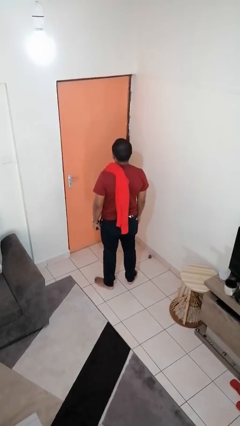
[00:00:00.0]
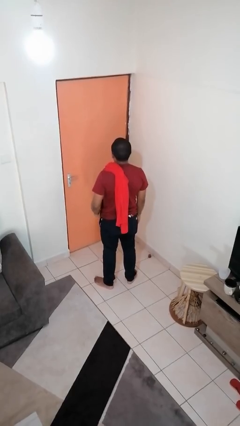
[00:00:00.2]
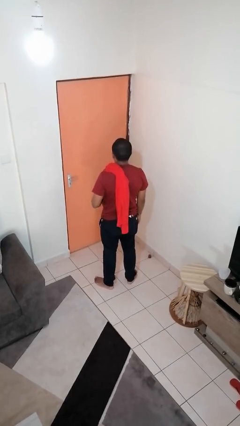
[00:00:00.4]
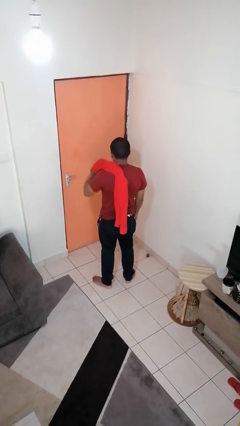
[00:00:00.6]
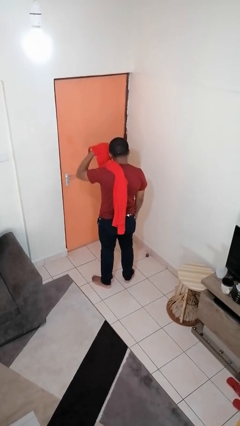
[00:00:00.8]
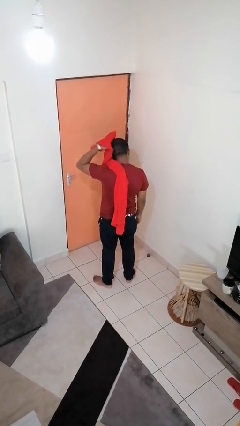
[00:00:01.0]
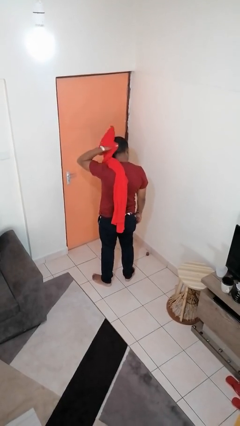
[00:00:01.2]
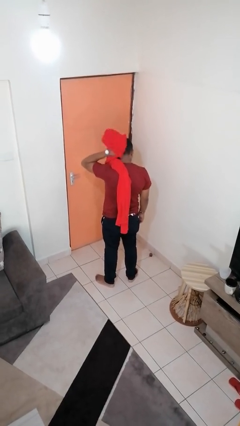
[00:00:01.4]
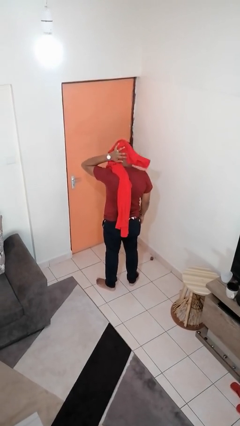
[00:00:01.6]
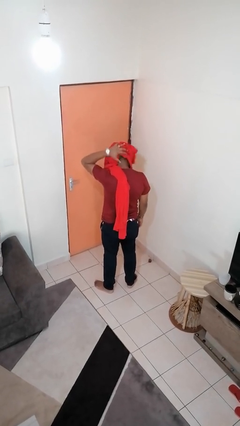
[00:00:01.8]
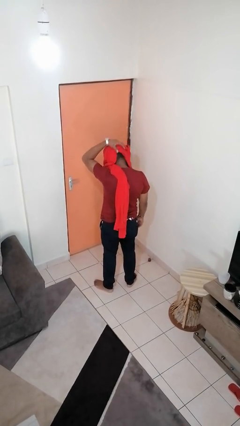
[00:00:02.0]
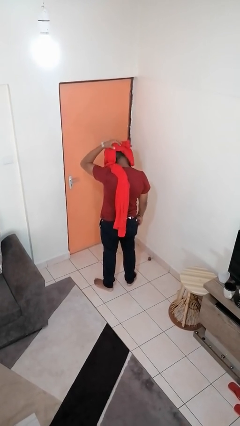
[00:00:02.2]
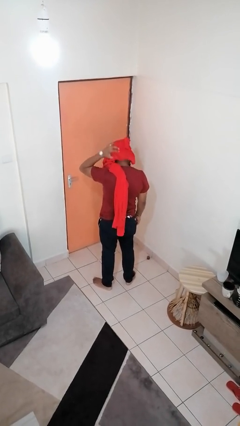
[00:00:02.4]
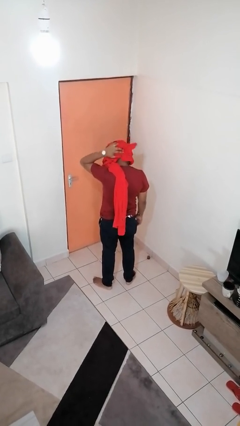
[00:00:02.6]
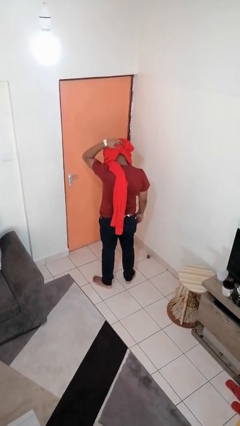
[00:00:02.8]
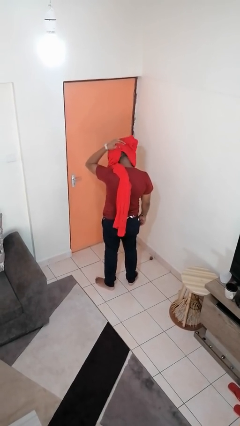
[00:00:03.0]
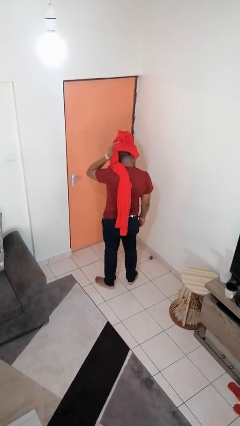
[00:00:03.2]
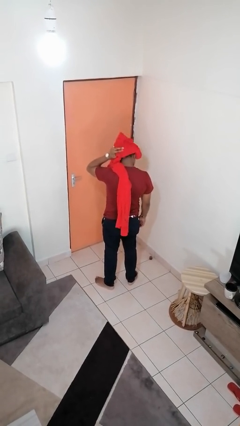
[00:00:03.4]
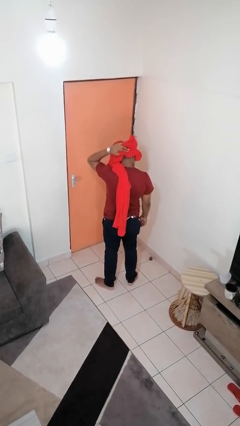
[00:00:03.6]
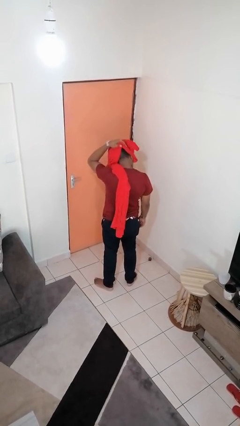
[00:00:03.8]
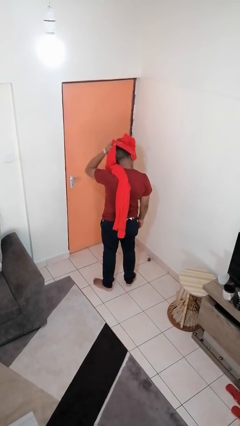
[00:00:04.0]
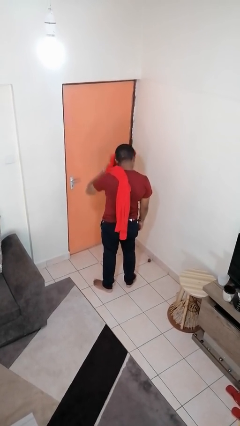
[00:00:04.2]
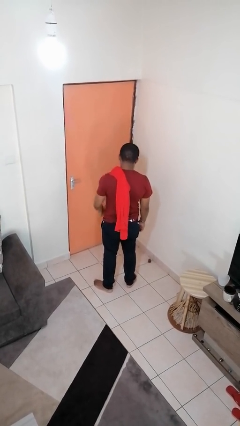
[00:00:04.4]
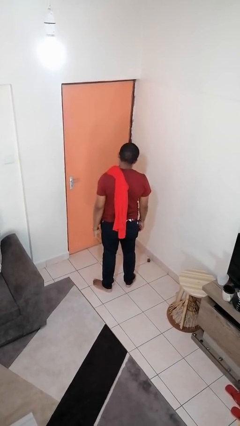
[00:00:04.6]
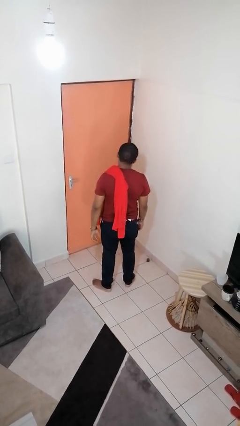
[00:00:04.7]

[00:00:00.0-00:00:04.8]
person dries hair with towel

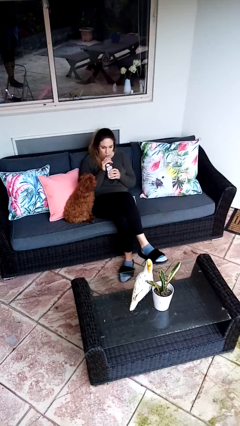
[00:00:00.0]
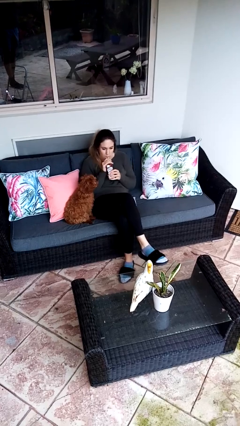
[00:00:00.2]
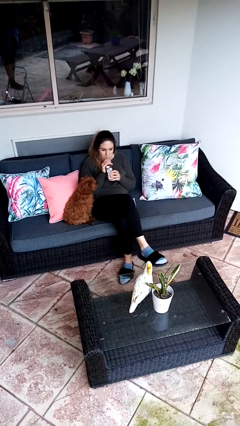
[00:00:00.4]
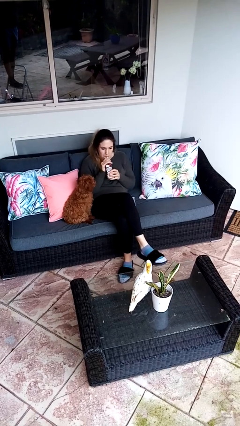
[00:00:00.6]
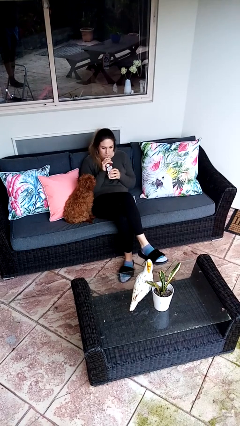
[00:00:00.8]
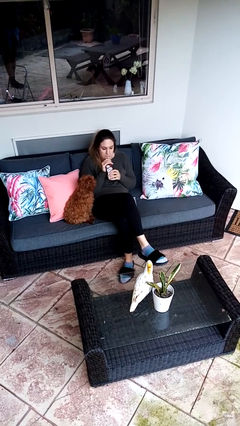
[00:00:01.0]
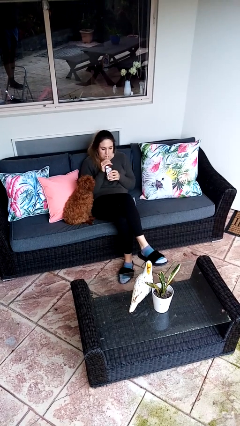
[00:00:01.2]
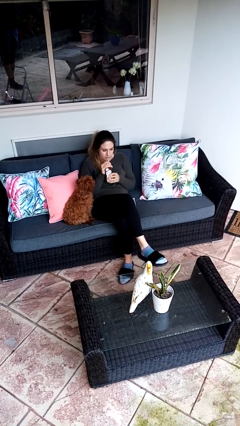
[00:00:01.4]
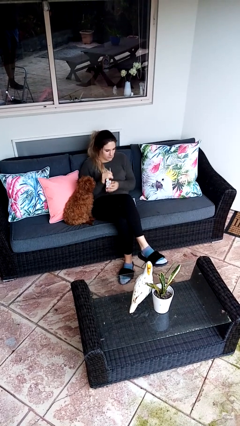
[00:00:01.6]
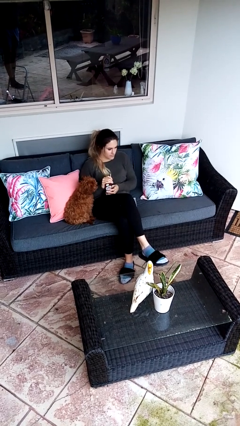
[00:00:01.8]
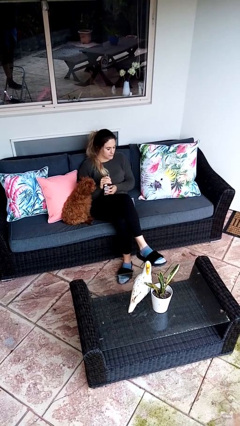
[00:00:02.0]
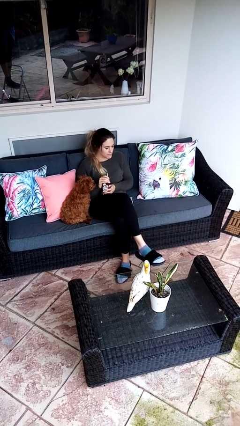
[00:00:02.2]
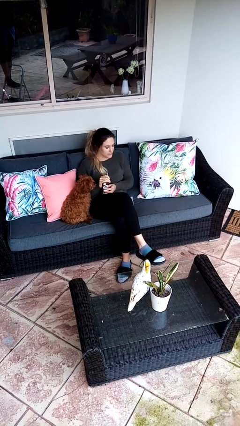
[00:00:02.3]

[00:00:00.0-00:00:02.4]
person drinks from straw

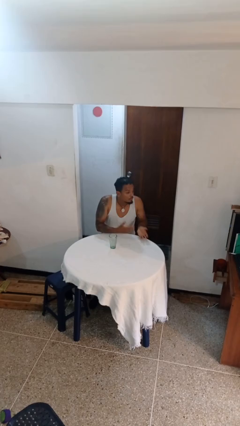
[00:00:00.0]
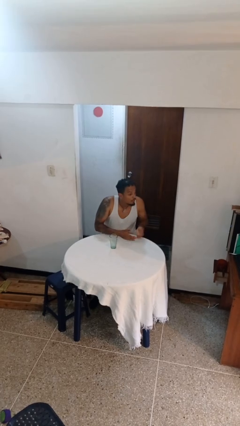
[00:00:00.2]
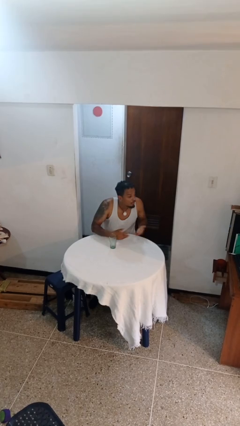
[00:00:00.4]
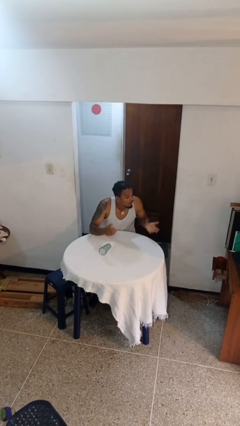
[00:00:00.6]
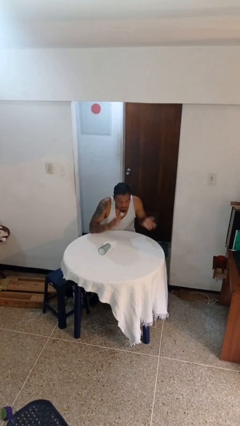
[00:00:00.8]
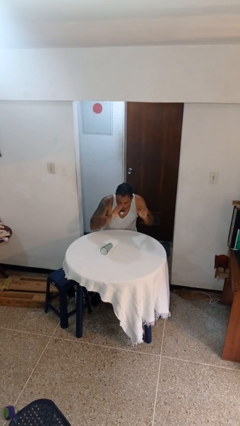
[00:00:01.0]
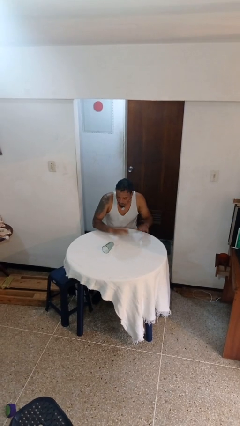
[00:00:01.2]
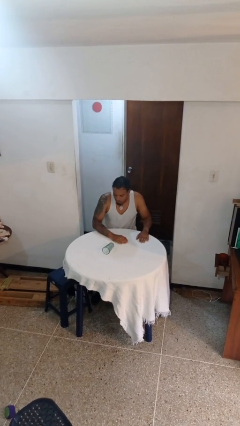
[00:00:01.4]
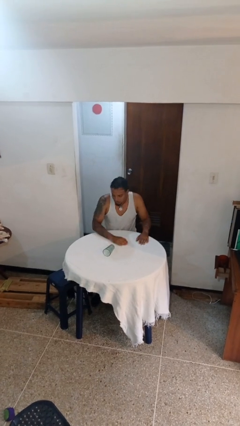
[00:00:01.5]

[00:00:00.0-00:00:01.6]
person knocks over glass

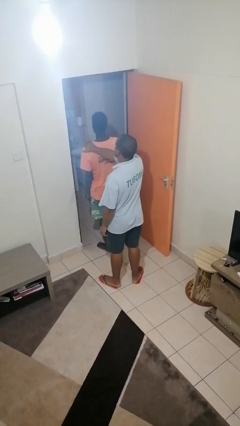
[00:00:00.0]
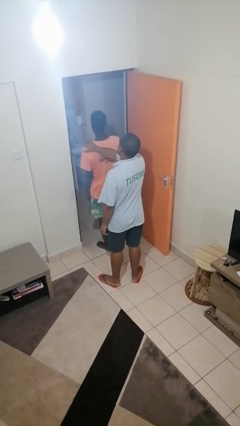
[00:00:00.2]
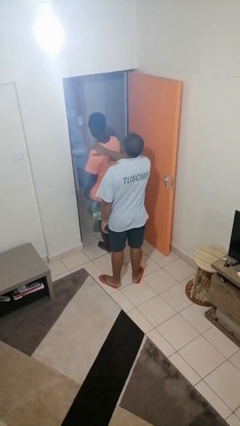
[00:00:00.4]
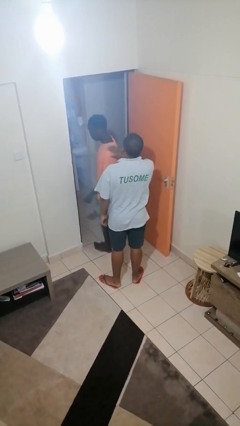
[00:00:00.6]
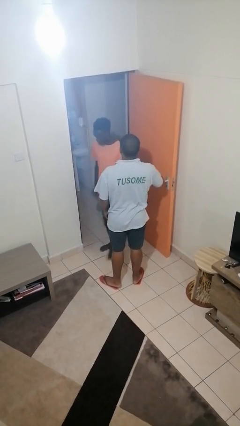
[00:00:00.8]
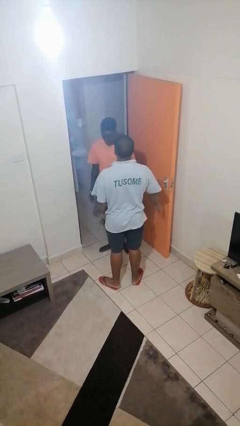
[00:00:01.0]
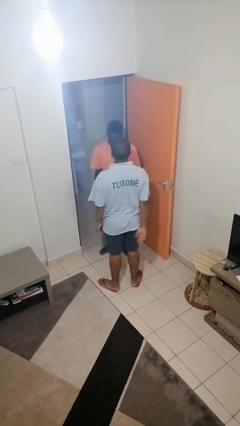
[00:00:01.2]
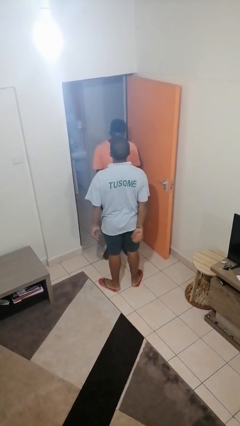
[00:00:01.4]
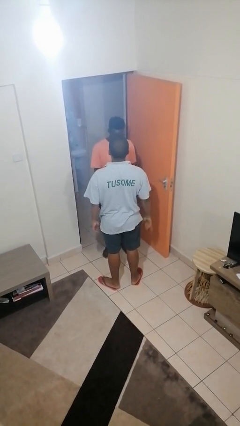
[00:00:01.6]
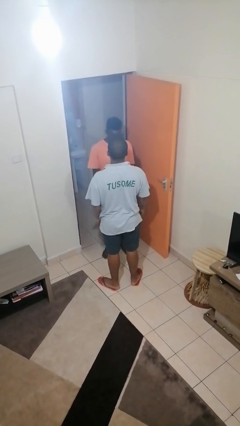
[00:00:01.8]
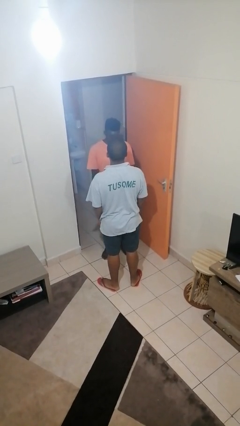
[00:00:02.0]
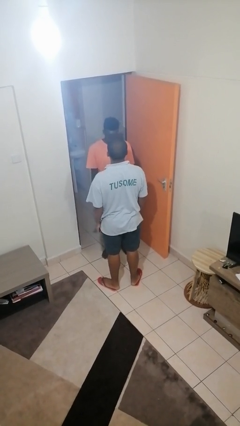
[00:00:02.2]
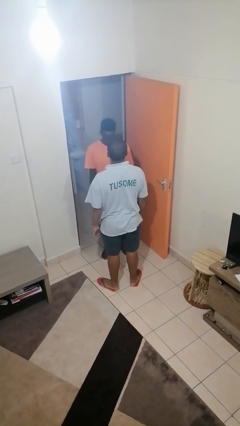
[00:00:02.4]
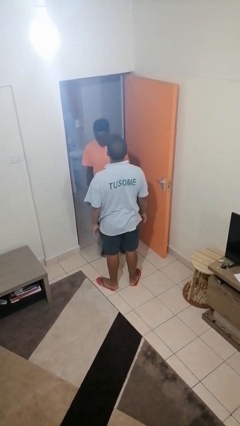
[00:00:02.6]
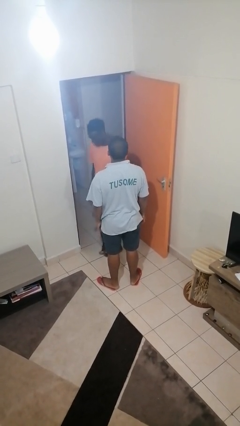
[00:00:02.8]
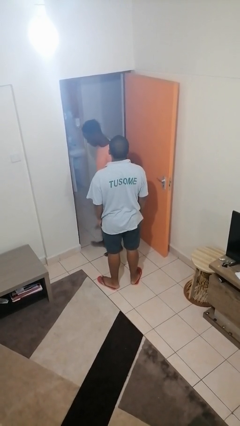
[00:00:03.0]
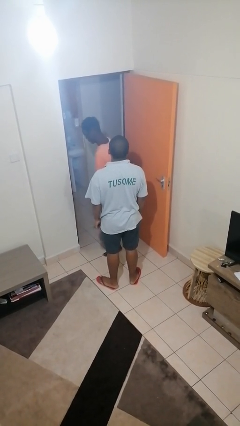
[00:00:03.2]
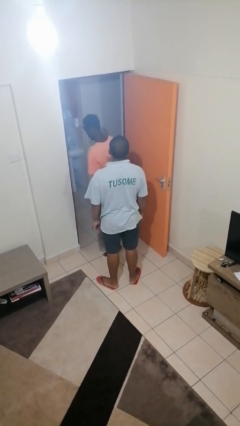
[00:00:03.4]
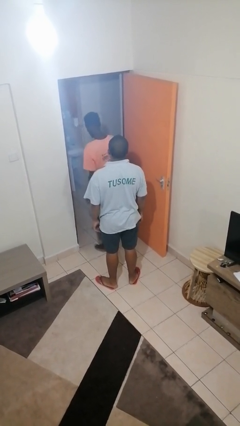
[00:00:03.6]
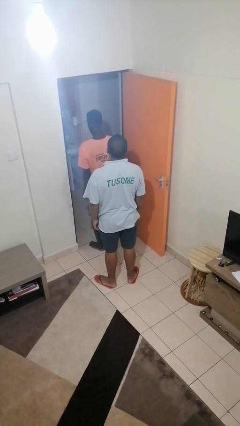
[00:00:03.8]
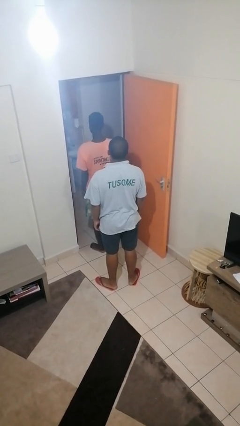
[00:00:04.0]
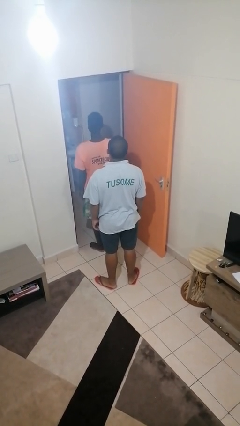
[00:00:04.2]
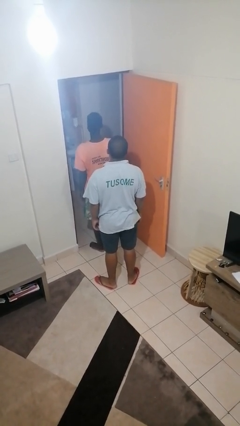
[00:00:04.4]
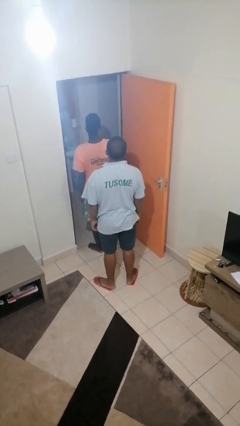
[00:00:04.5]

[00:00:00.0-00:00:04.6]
person spins person around

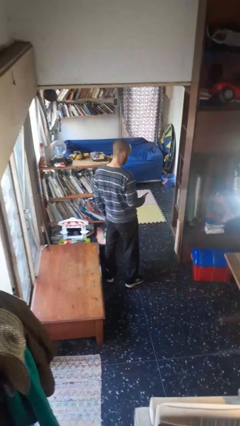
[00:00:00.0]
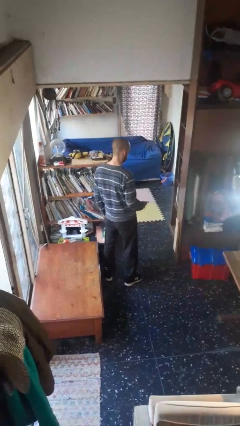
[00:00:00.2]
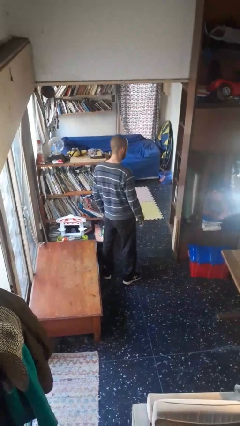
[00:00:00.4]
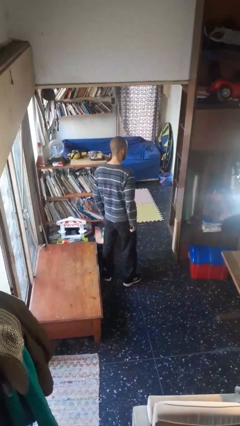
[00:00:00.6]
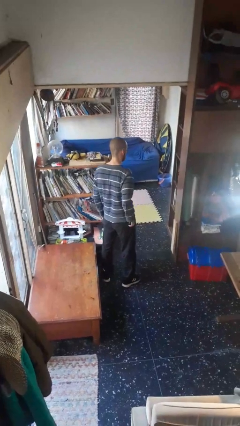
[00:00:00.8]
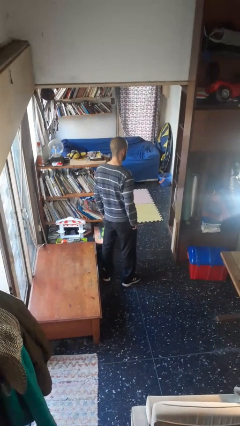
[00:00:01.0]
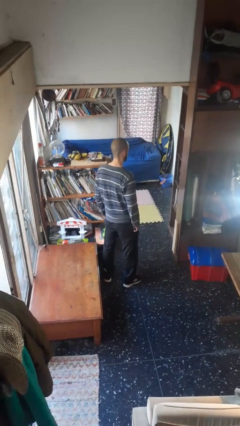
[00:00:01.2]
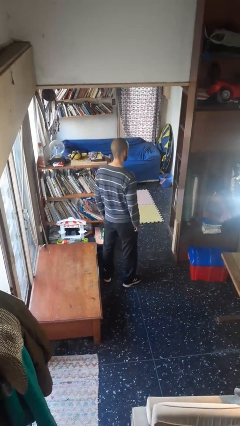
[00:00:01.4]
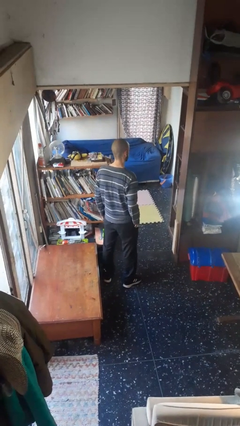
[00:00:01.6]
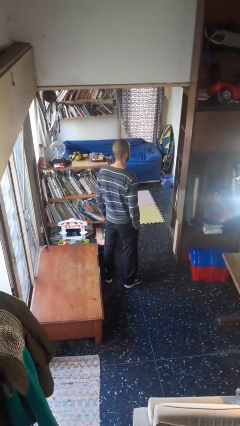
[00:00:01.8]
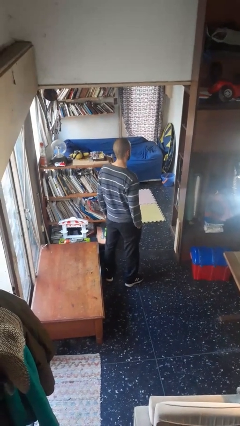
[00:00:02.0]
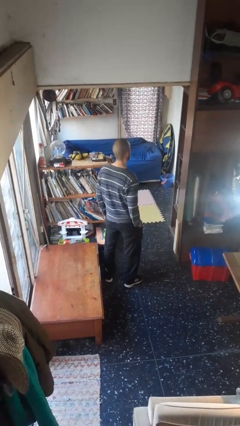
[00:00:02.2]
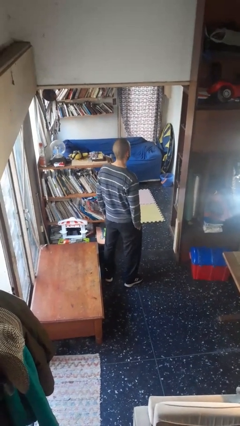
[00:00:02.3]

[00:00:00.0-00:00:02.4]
person puts phone into pocket

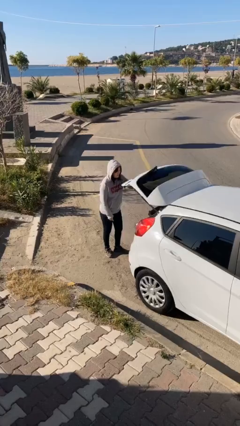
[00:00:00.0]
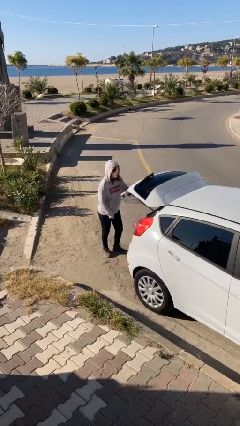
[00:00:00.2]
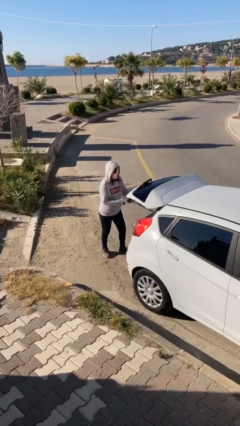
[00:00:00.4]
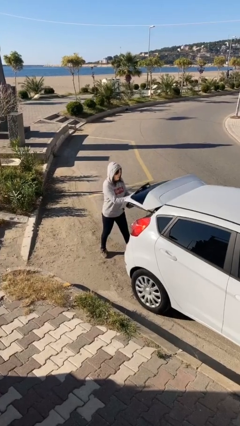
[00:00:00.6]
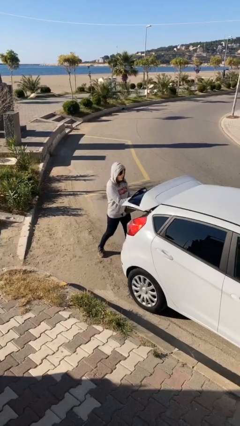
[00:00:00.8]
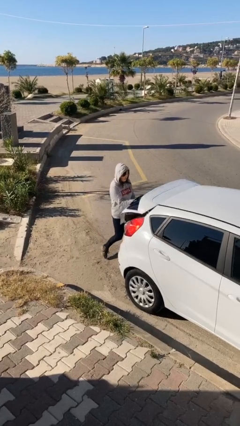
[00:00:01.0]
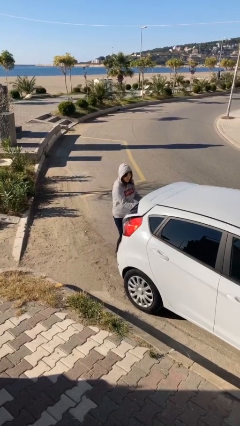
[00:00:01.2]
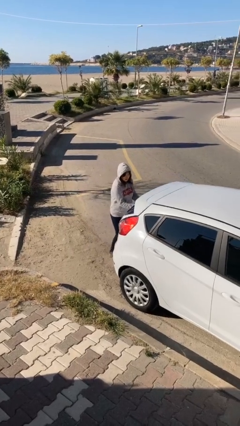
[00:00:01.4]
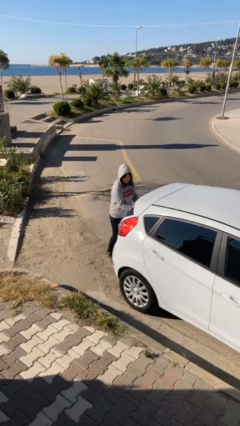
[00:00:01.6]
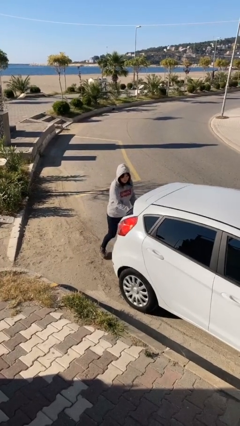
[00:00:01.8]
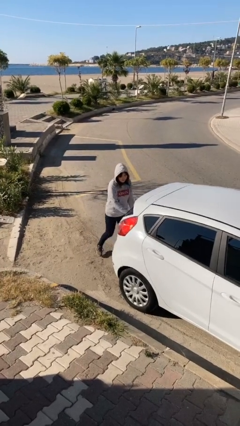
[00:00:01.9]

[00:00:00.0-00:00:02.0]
person closes car trunk
